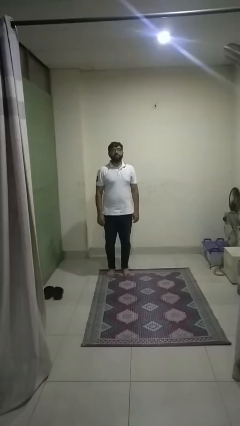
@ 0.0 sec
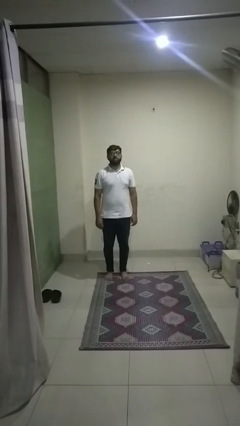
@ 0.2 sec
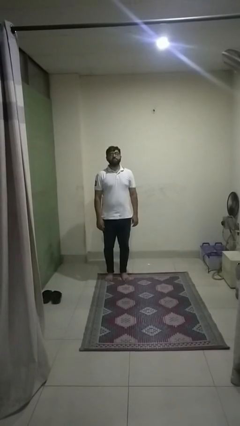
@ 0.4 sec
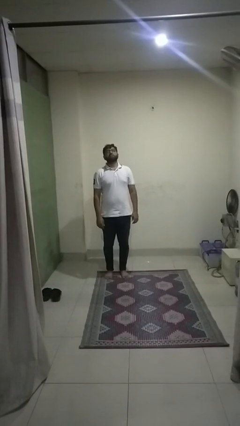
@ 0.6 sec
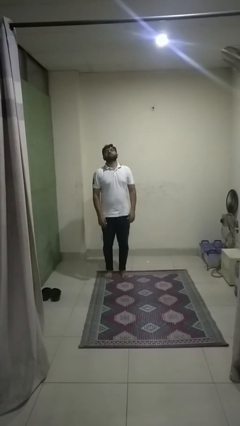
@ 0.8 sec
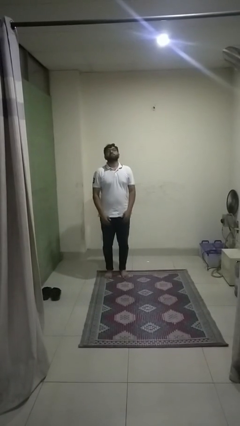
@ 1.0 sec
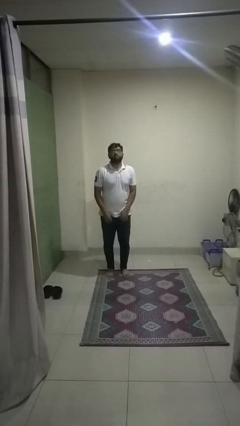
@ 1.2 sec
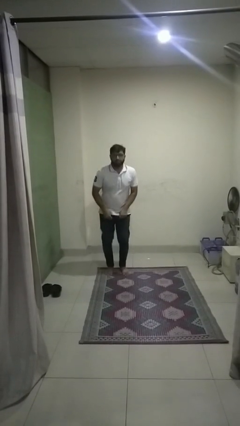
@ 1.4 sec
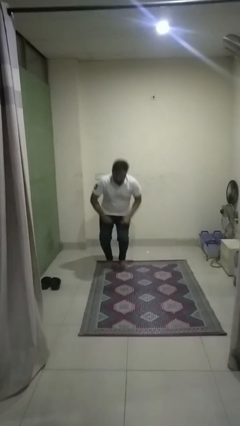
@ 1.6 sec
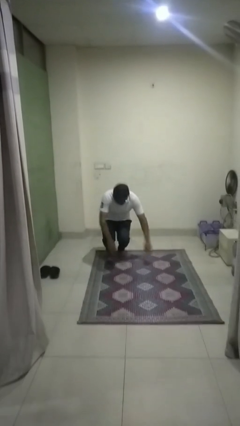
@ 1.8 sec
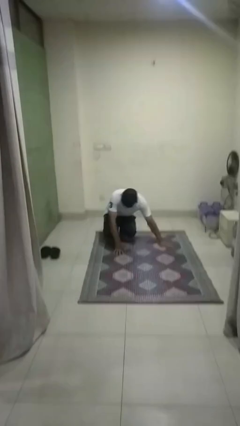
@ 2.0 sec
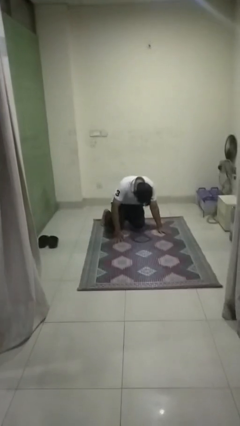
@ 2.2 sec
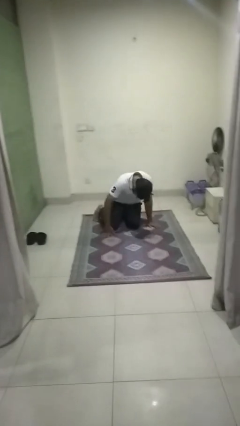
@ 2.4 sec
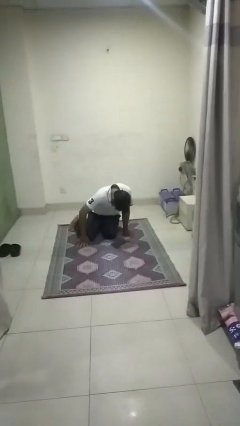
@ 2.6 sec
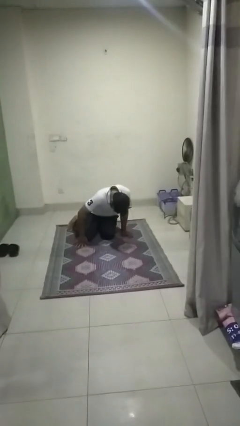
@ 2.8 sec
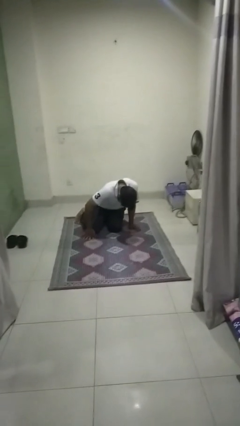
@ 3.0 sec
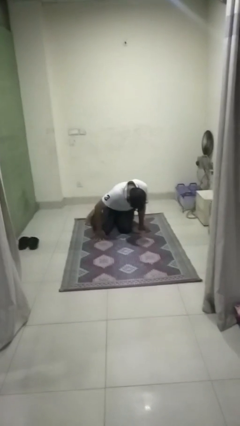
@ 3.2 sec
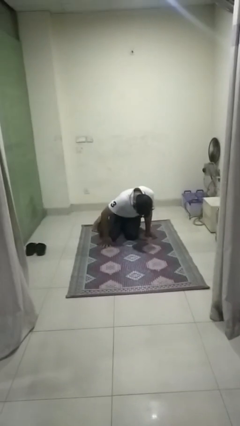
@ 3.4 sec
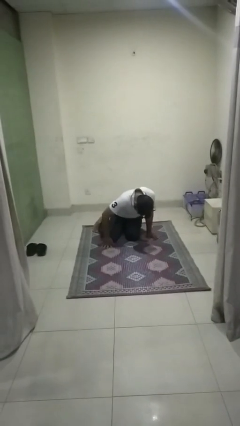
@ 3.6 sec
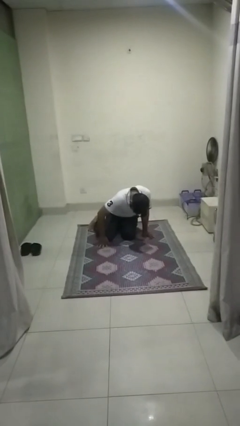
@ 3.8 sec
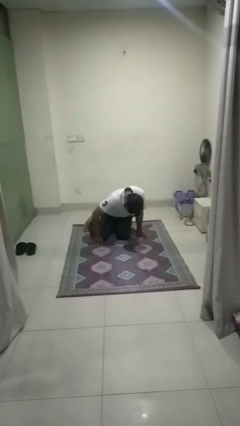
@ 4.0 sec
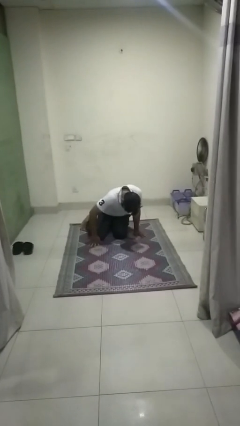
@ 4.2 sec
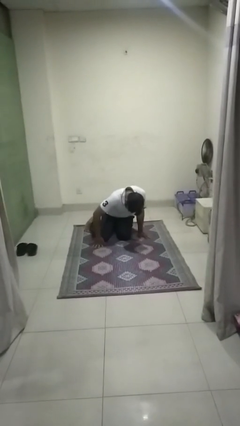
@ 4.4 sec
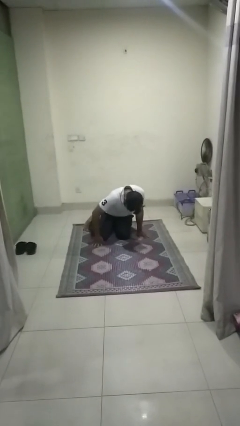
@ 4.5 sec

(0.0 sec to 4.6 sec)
person falls while standing

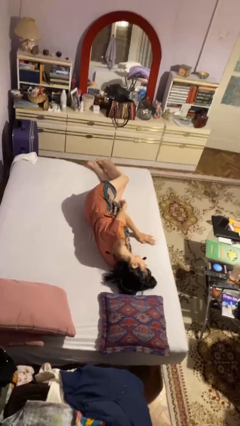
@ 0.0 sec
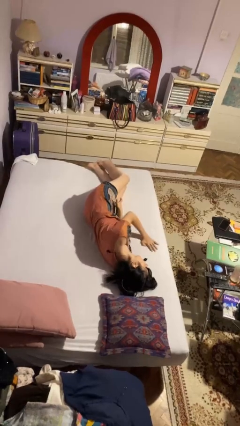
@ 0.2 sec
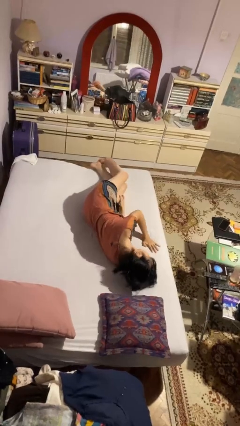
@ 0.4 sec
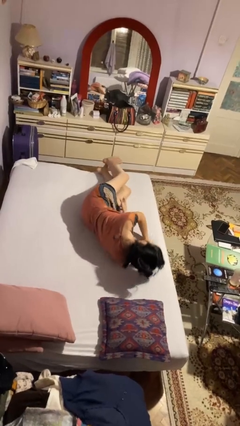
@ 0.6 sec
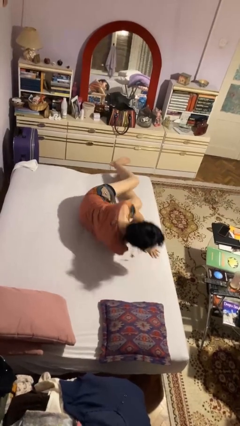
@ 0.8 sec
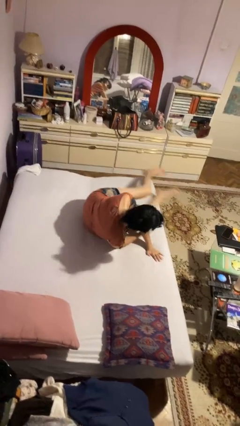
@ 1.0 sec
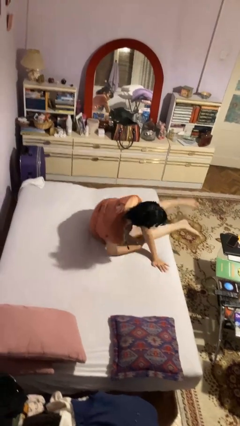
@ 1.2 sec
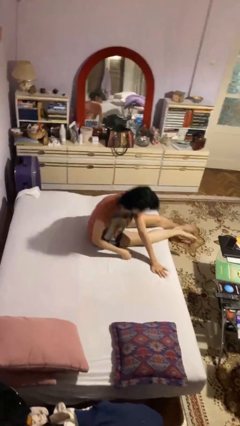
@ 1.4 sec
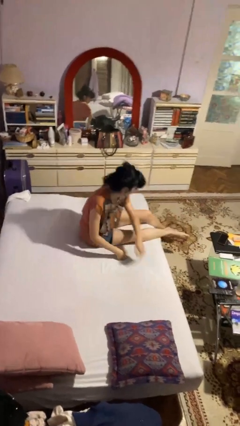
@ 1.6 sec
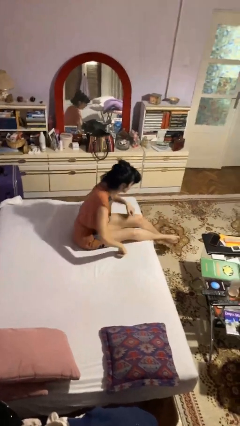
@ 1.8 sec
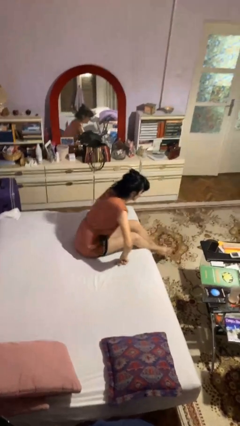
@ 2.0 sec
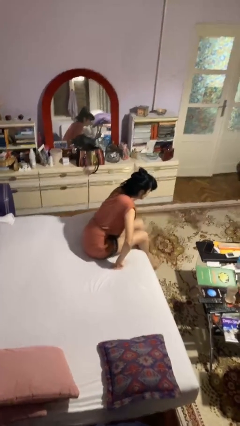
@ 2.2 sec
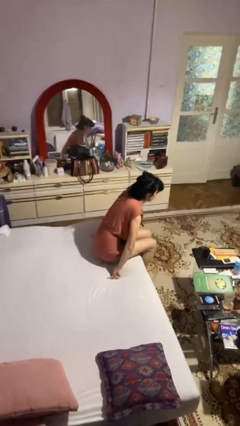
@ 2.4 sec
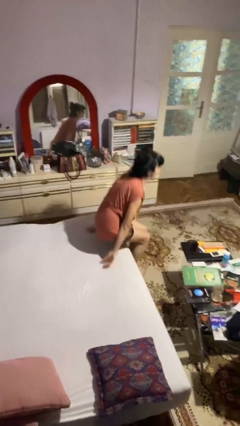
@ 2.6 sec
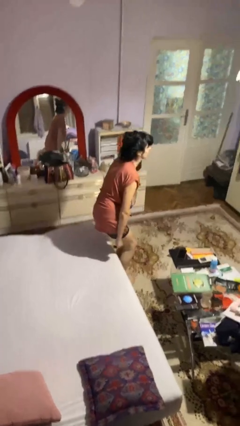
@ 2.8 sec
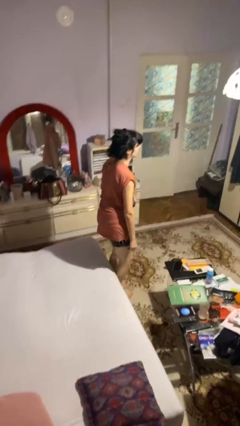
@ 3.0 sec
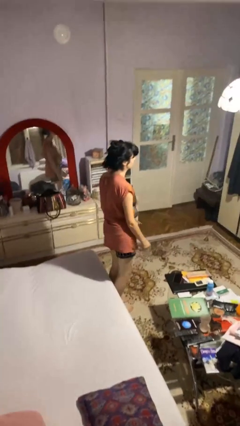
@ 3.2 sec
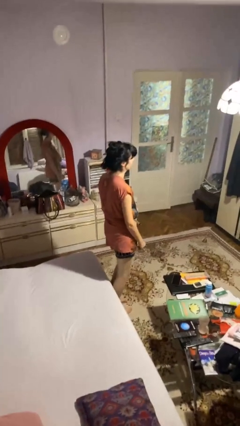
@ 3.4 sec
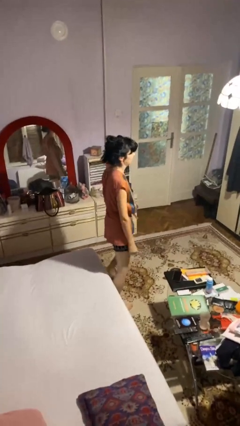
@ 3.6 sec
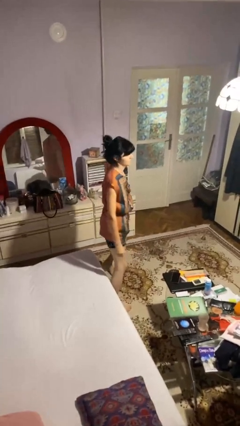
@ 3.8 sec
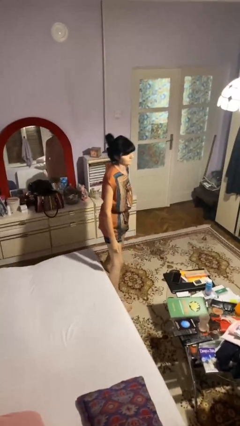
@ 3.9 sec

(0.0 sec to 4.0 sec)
person stands up

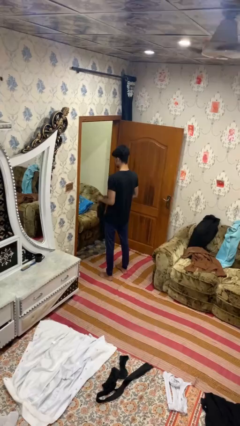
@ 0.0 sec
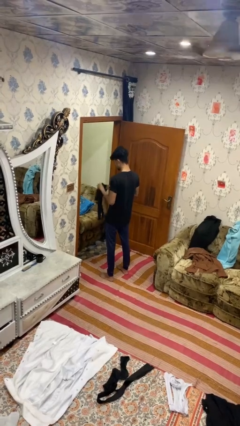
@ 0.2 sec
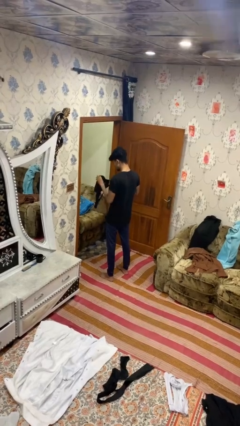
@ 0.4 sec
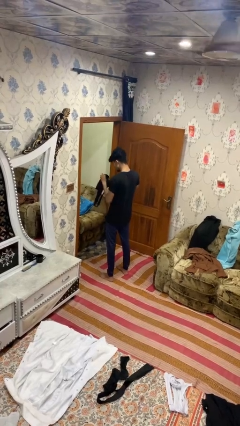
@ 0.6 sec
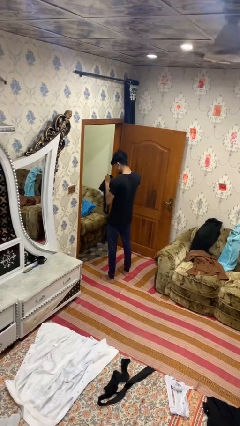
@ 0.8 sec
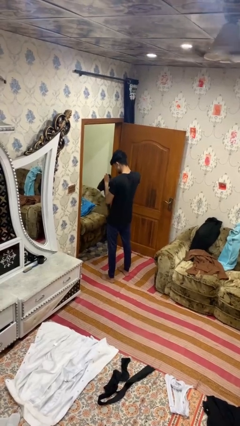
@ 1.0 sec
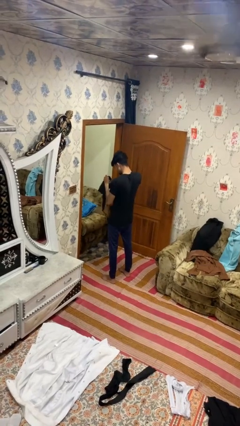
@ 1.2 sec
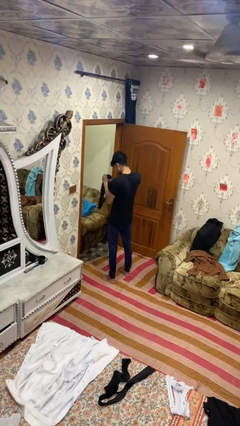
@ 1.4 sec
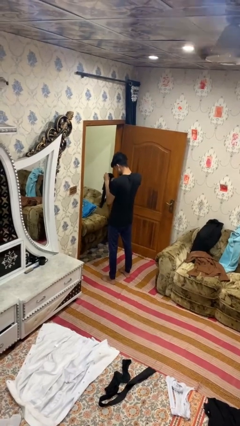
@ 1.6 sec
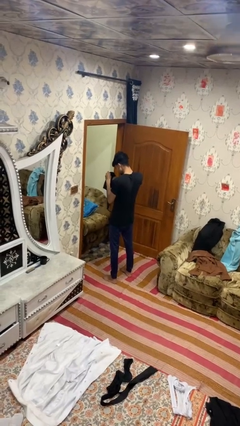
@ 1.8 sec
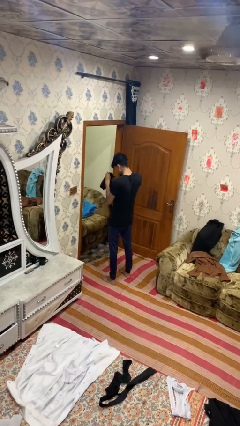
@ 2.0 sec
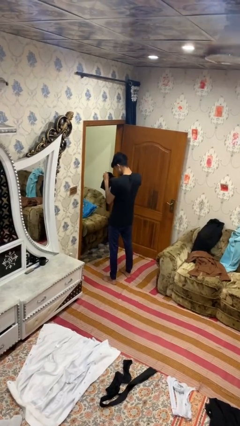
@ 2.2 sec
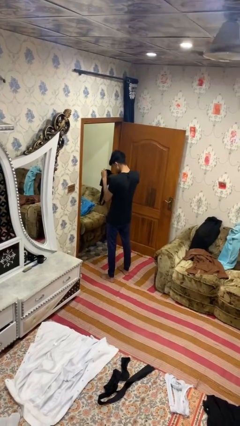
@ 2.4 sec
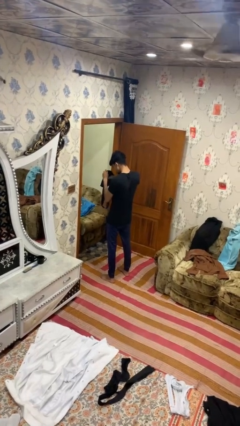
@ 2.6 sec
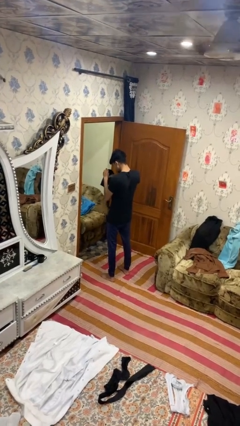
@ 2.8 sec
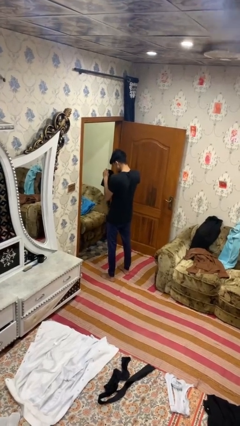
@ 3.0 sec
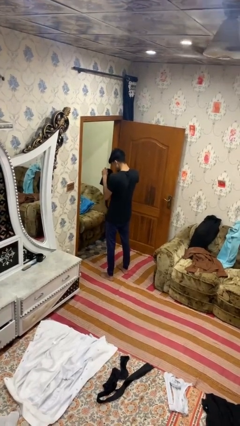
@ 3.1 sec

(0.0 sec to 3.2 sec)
person searches in bag

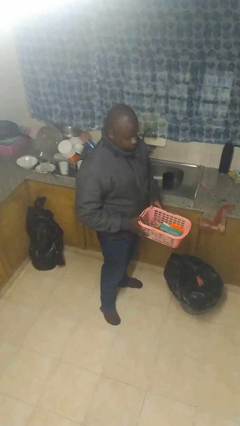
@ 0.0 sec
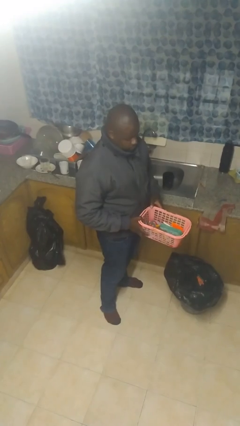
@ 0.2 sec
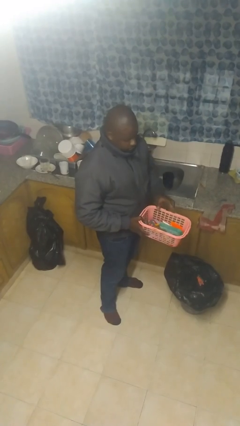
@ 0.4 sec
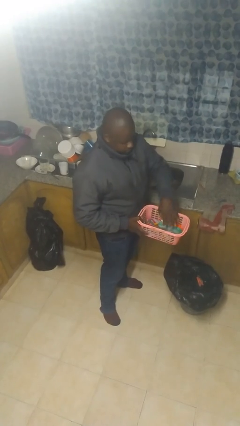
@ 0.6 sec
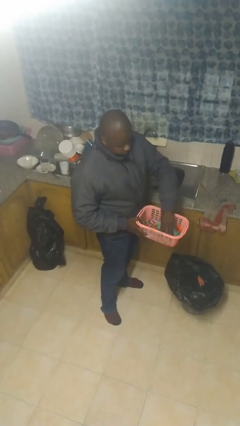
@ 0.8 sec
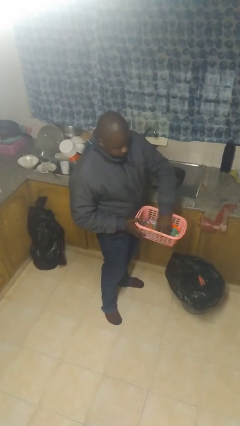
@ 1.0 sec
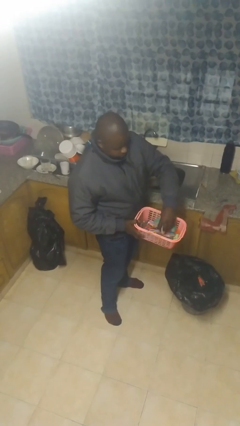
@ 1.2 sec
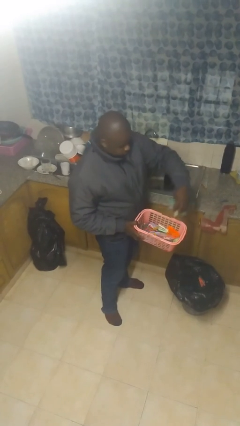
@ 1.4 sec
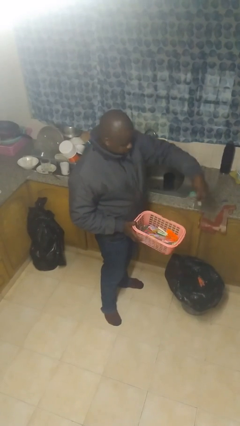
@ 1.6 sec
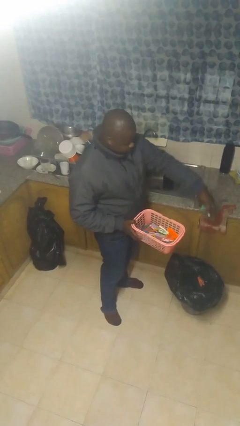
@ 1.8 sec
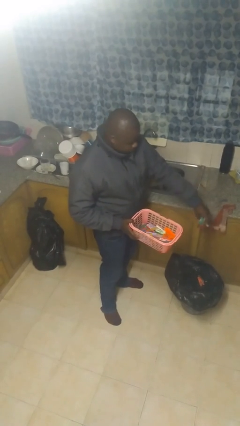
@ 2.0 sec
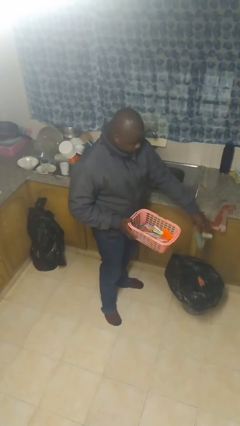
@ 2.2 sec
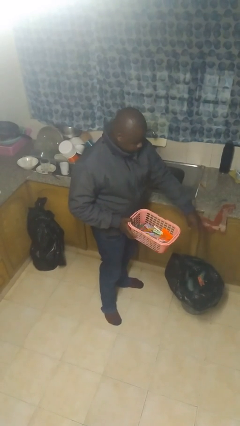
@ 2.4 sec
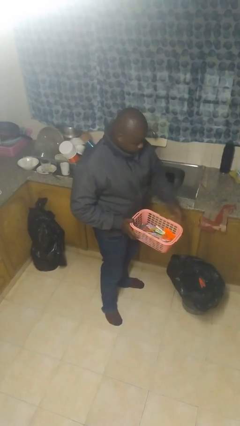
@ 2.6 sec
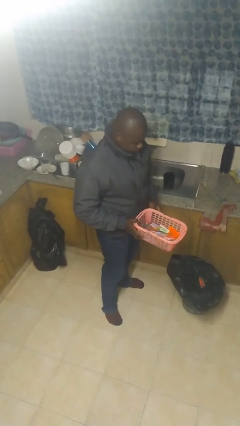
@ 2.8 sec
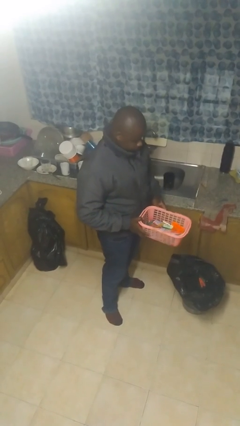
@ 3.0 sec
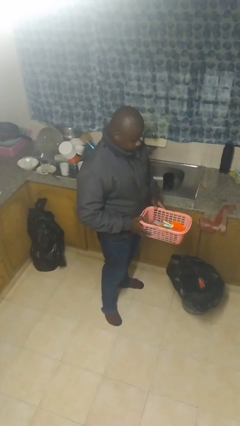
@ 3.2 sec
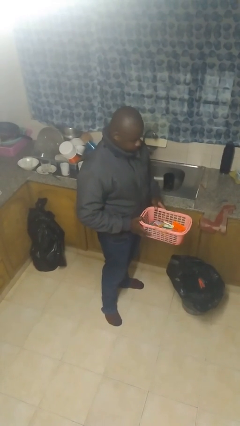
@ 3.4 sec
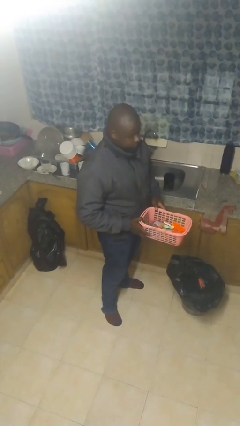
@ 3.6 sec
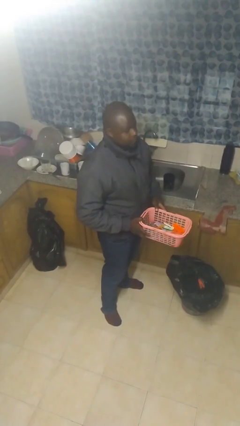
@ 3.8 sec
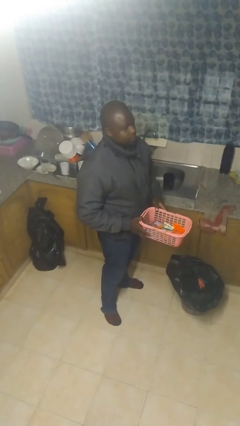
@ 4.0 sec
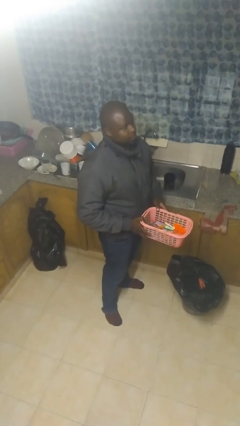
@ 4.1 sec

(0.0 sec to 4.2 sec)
person discards trash

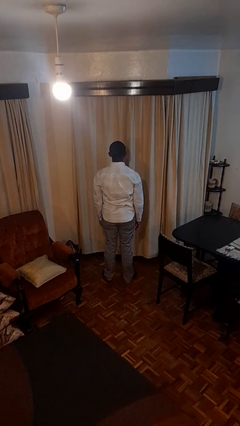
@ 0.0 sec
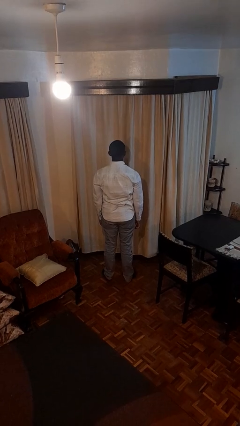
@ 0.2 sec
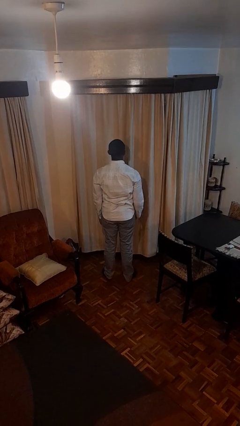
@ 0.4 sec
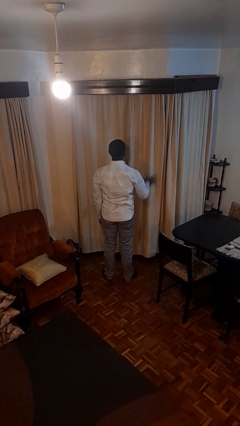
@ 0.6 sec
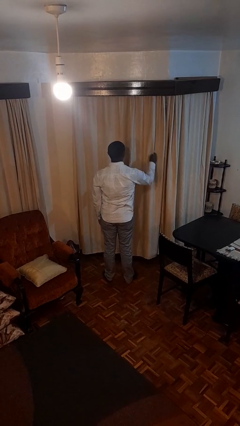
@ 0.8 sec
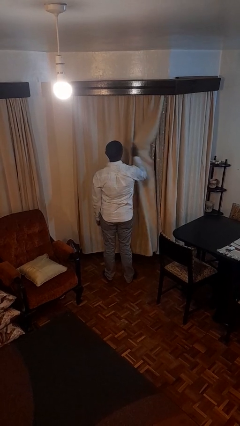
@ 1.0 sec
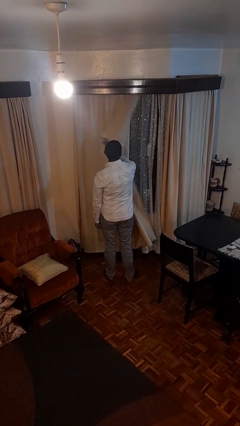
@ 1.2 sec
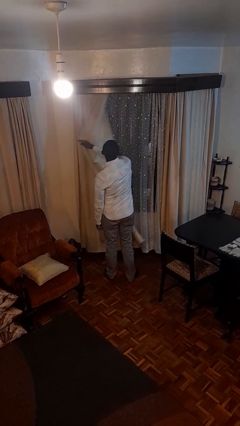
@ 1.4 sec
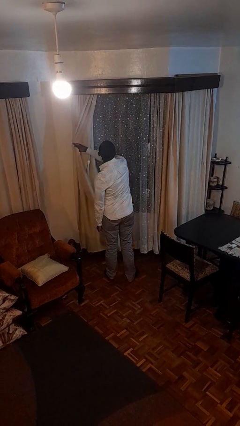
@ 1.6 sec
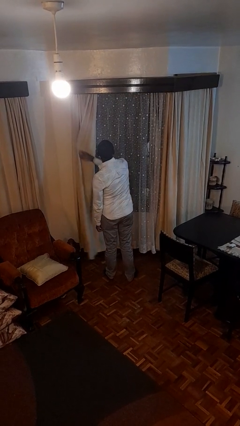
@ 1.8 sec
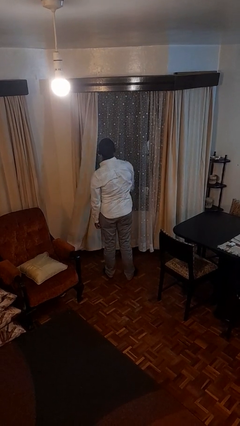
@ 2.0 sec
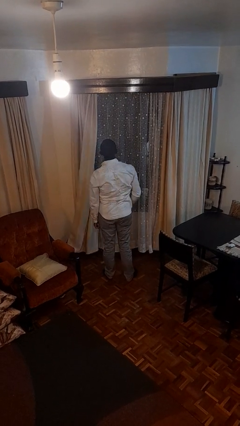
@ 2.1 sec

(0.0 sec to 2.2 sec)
person opens curtains
